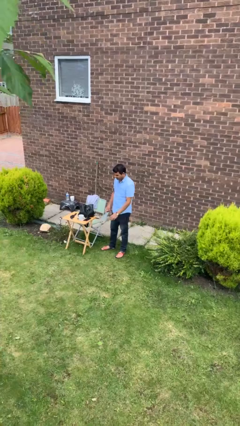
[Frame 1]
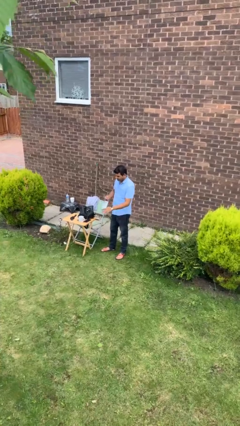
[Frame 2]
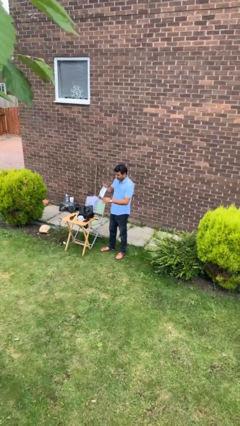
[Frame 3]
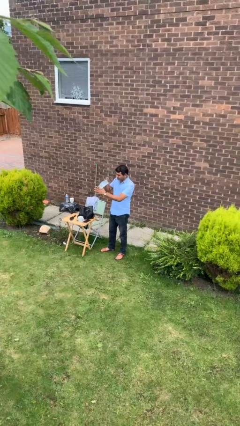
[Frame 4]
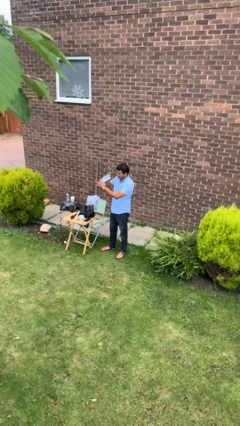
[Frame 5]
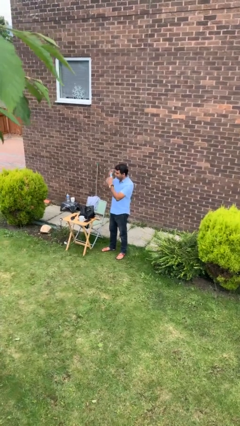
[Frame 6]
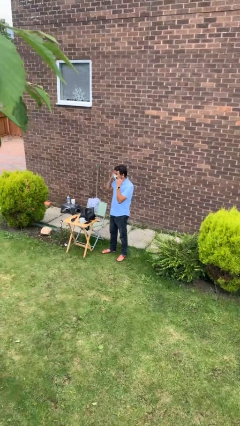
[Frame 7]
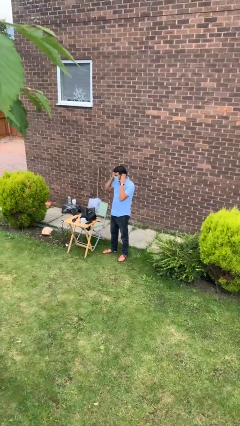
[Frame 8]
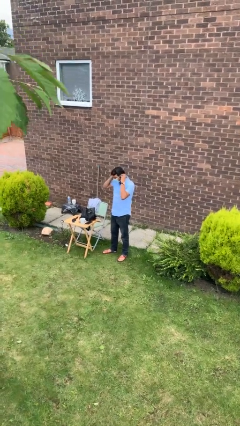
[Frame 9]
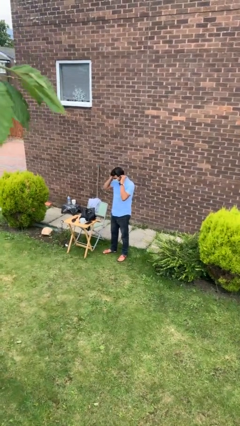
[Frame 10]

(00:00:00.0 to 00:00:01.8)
person puts on facemask

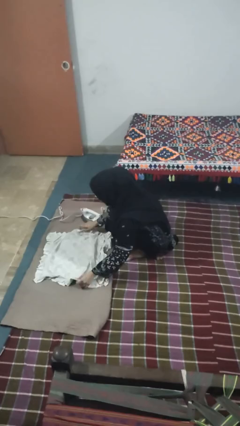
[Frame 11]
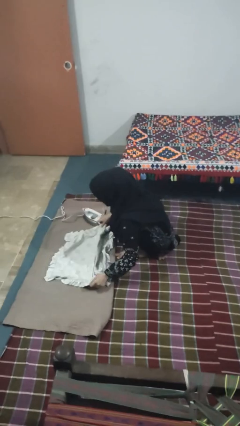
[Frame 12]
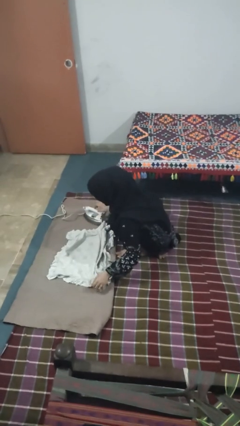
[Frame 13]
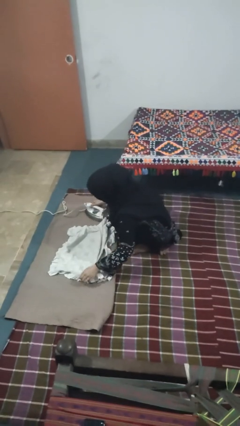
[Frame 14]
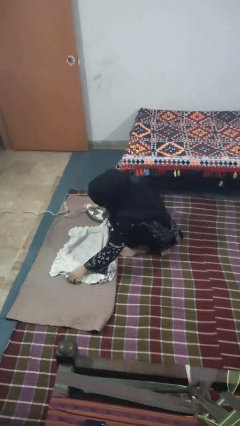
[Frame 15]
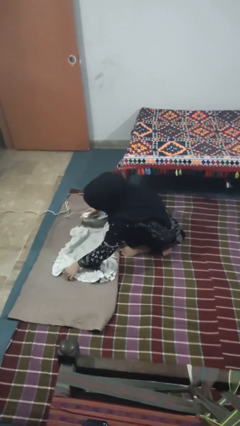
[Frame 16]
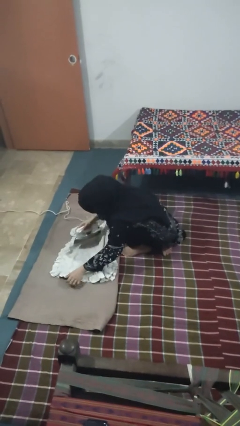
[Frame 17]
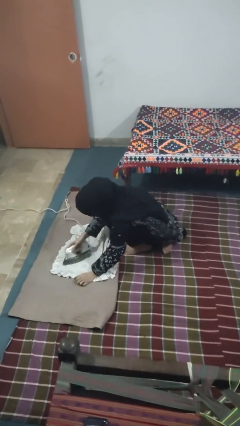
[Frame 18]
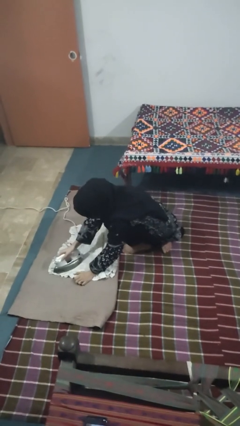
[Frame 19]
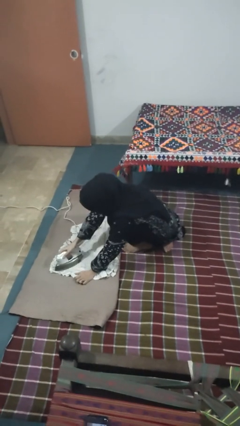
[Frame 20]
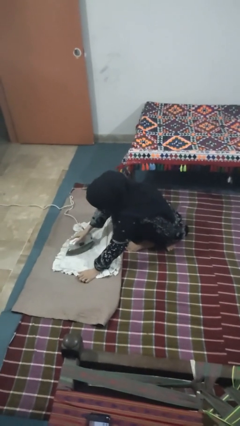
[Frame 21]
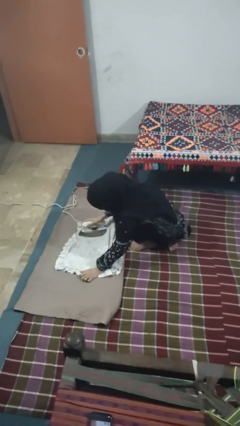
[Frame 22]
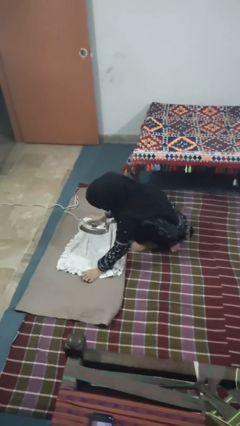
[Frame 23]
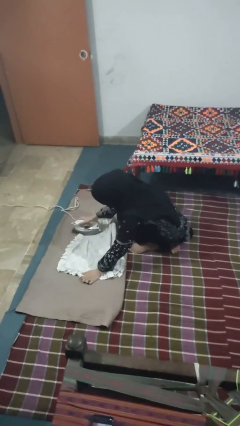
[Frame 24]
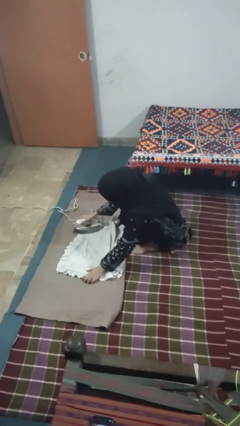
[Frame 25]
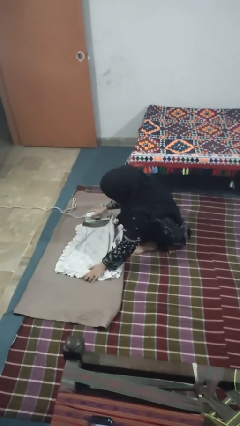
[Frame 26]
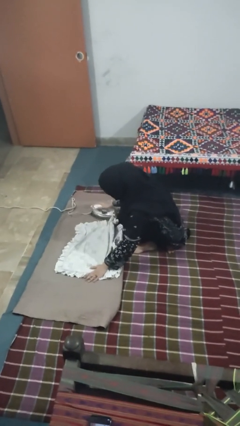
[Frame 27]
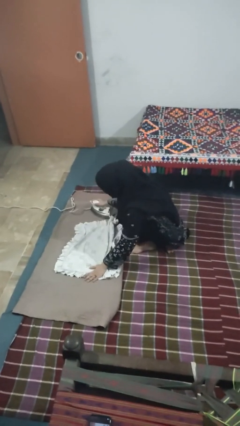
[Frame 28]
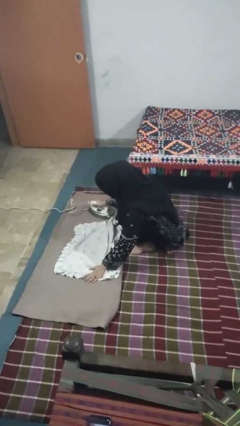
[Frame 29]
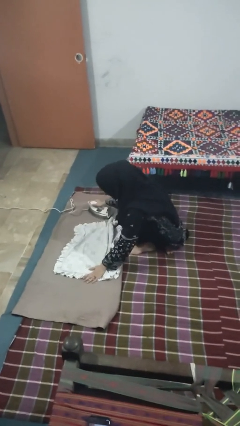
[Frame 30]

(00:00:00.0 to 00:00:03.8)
person irons clothes

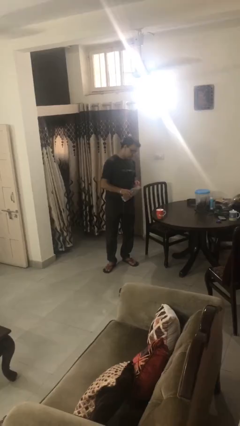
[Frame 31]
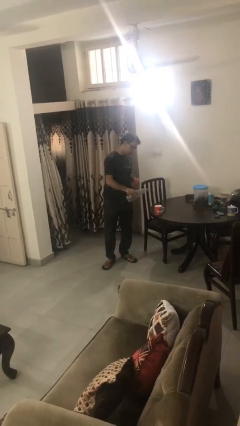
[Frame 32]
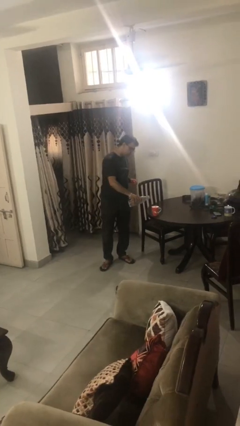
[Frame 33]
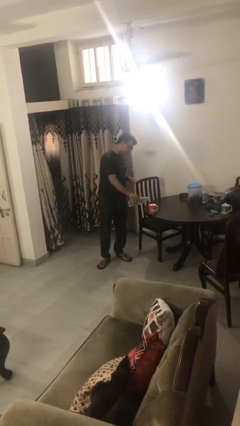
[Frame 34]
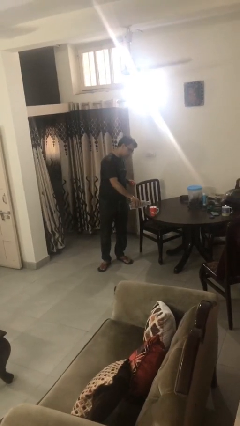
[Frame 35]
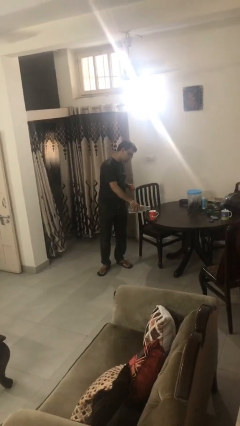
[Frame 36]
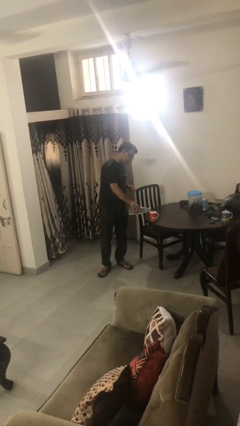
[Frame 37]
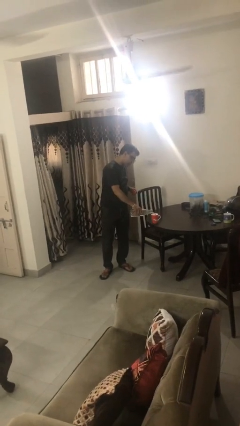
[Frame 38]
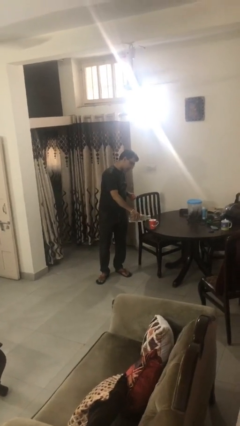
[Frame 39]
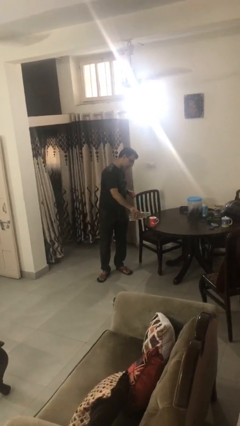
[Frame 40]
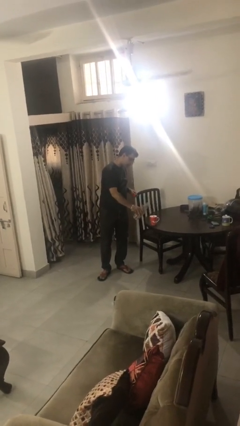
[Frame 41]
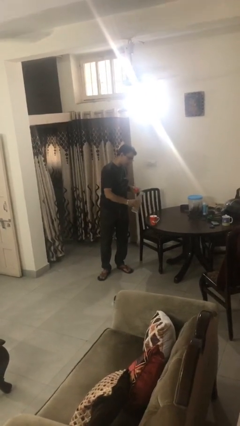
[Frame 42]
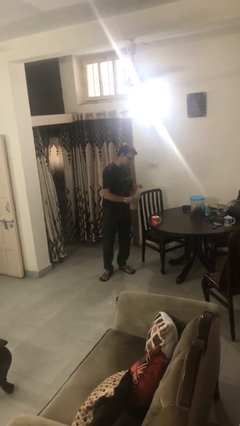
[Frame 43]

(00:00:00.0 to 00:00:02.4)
person pours liquid into cup

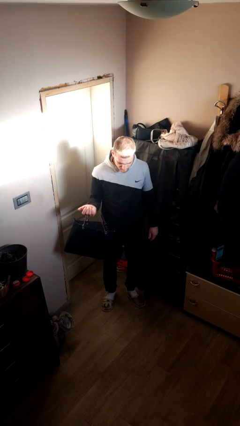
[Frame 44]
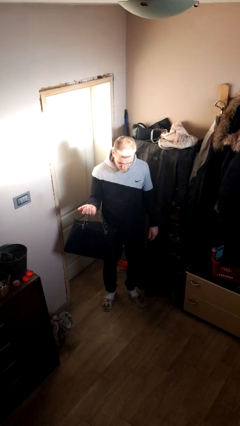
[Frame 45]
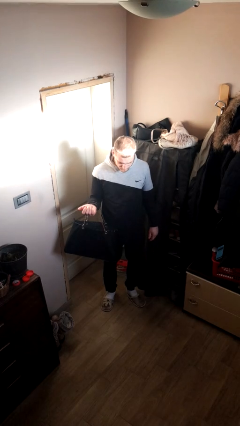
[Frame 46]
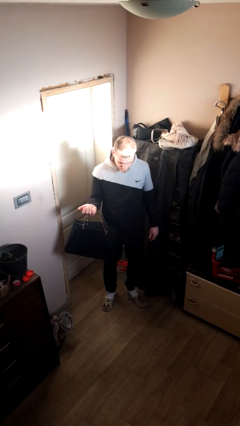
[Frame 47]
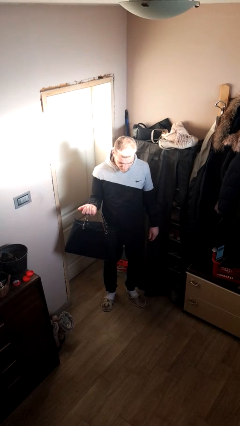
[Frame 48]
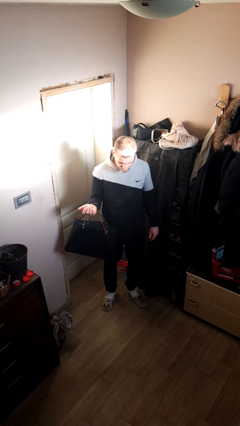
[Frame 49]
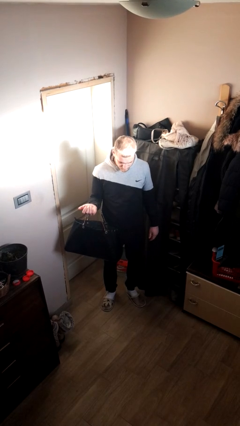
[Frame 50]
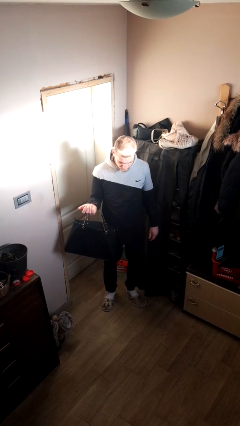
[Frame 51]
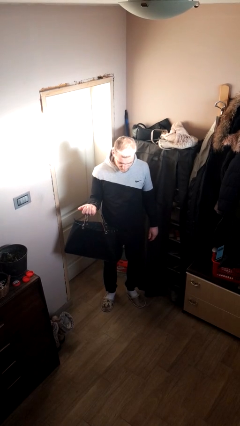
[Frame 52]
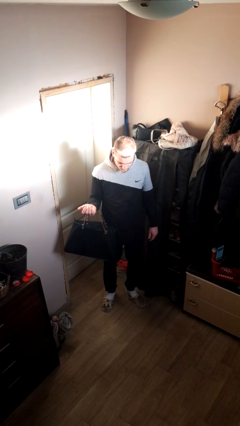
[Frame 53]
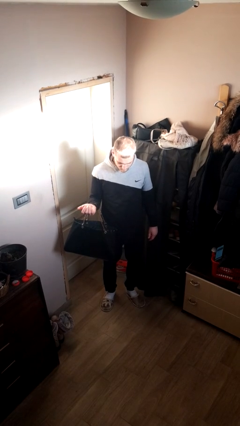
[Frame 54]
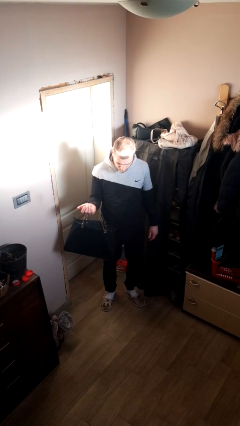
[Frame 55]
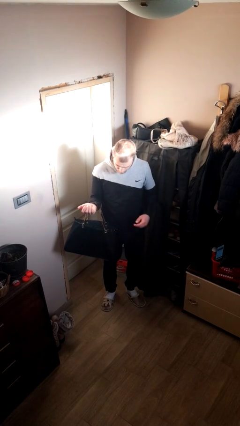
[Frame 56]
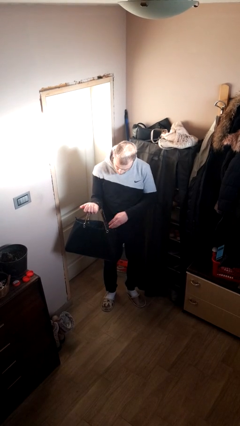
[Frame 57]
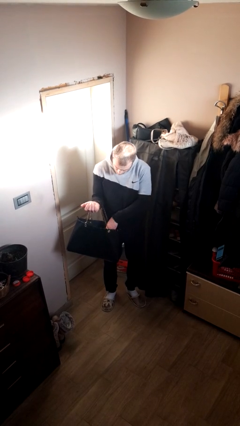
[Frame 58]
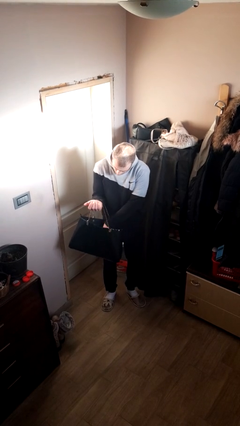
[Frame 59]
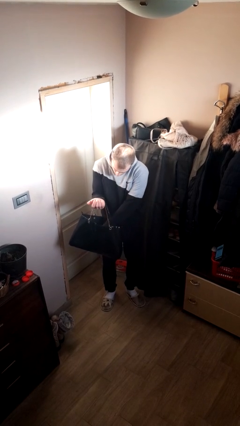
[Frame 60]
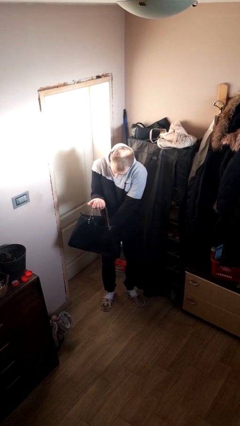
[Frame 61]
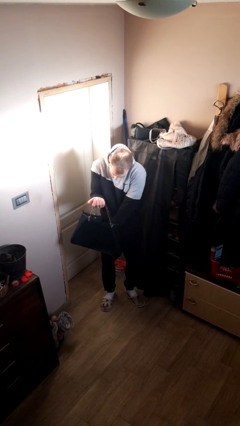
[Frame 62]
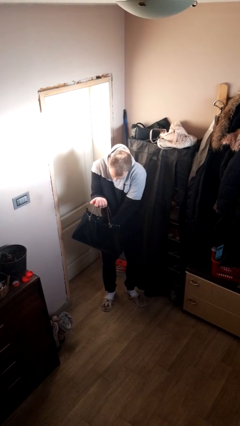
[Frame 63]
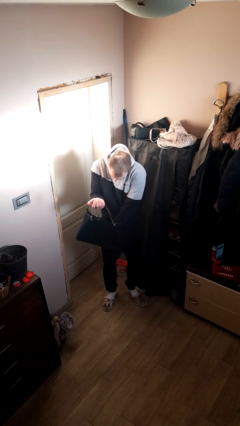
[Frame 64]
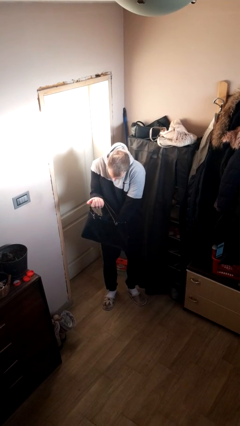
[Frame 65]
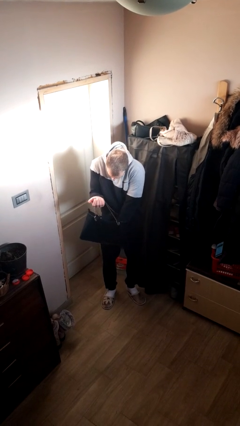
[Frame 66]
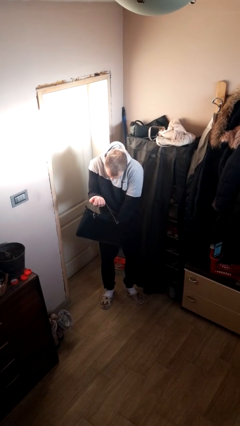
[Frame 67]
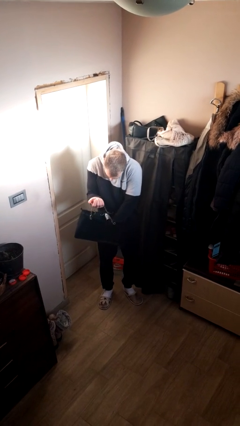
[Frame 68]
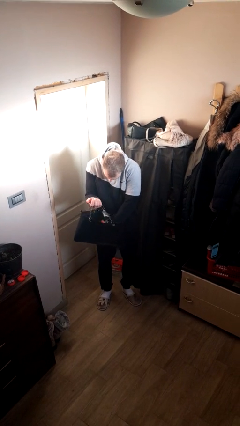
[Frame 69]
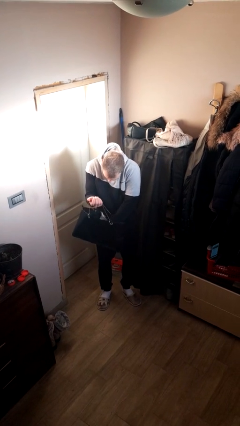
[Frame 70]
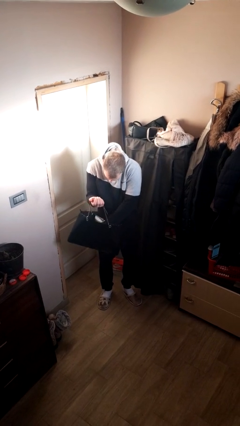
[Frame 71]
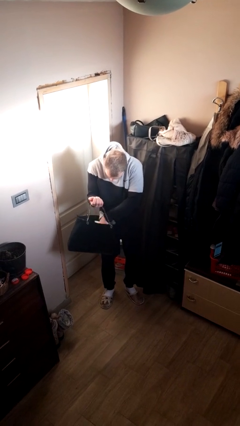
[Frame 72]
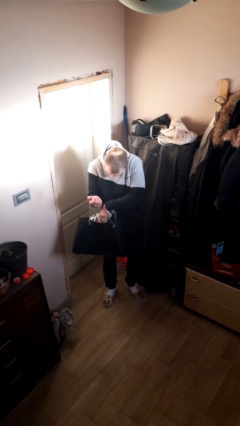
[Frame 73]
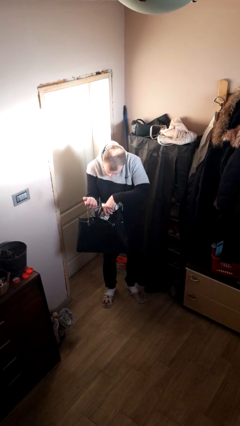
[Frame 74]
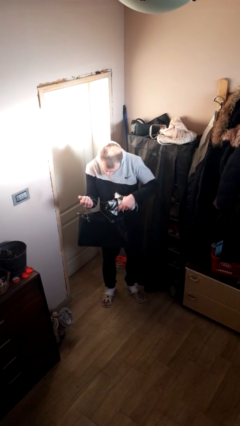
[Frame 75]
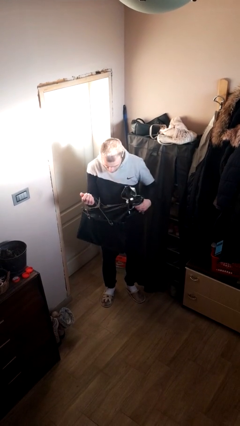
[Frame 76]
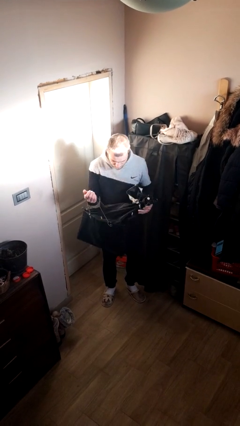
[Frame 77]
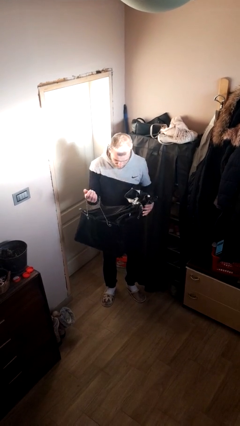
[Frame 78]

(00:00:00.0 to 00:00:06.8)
person searches in purse

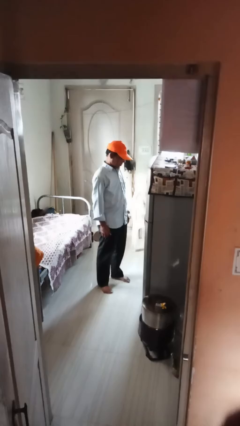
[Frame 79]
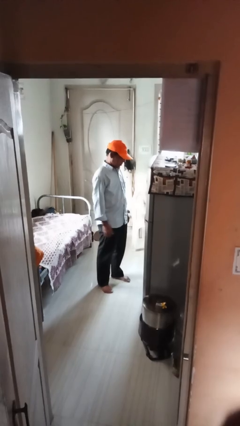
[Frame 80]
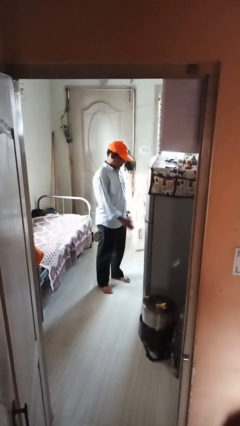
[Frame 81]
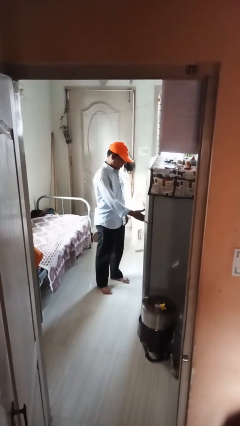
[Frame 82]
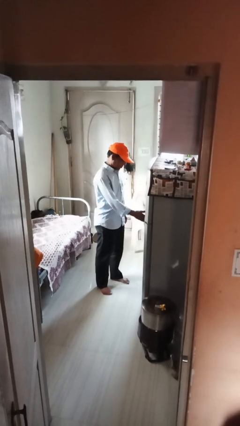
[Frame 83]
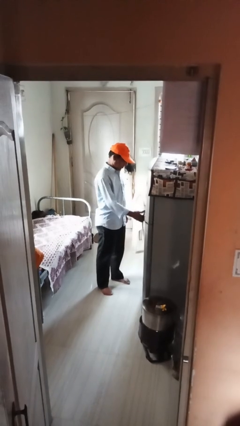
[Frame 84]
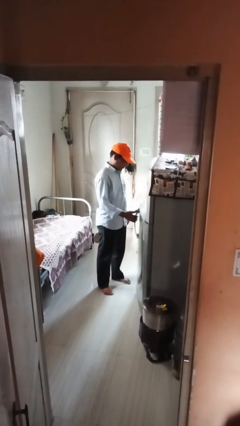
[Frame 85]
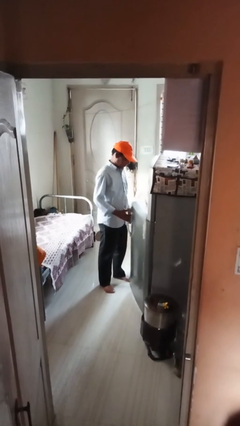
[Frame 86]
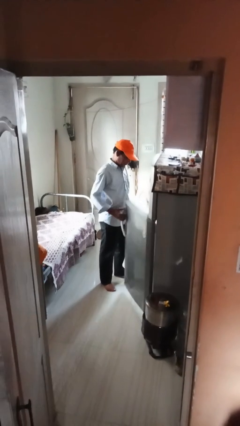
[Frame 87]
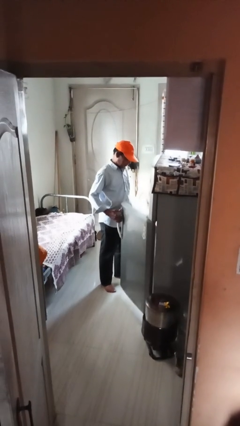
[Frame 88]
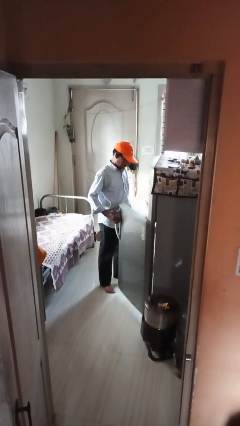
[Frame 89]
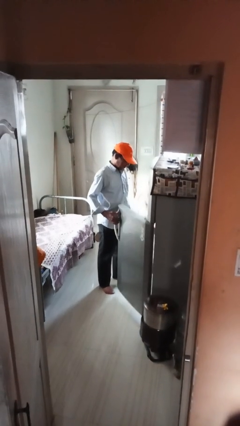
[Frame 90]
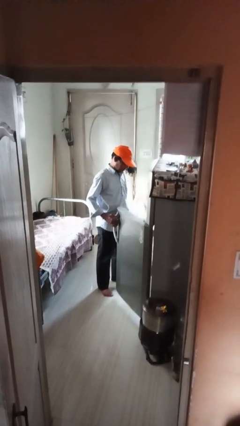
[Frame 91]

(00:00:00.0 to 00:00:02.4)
person opens refrigerator
